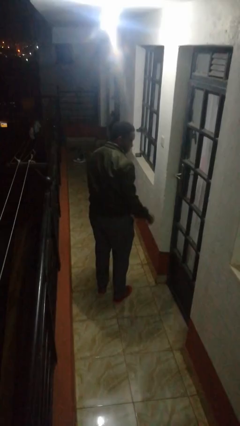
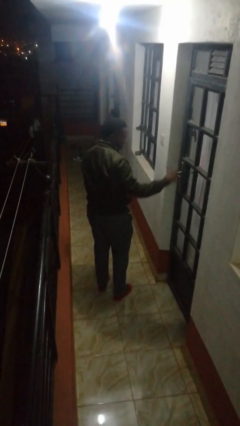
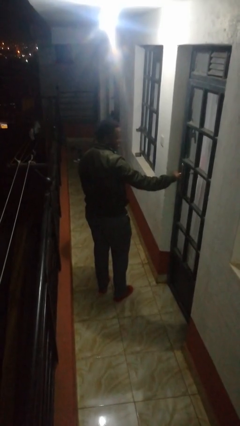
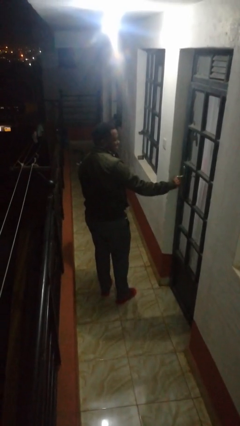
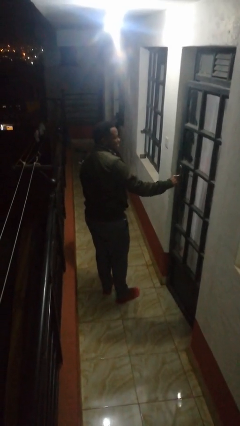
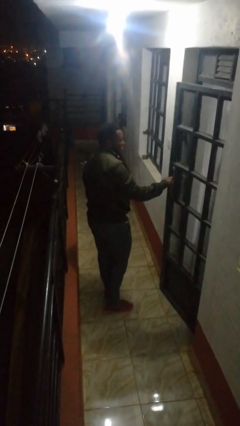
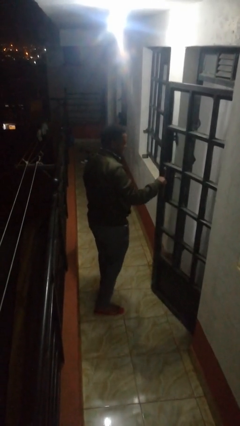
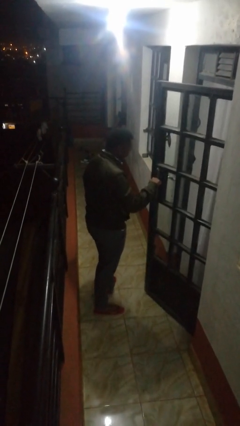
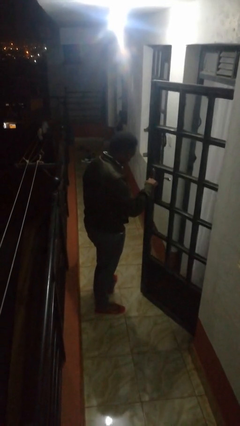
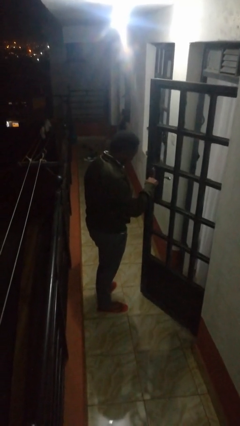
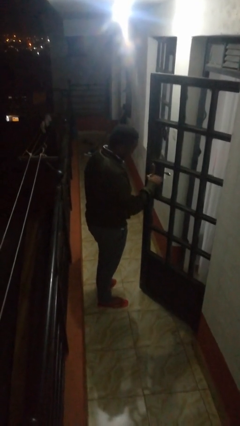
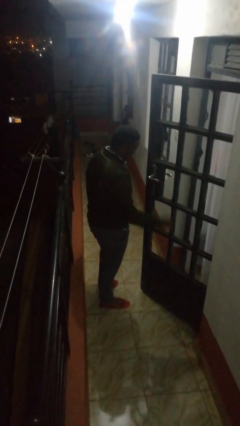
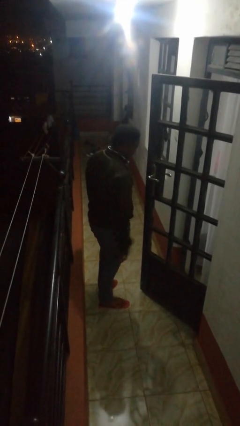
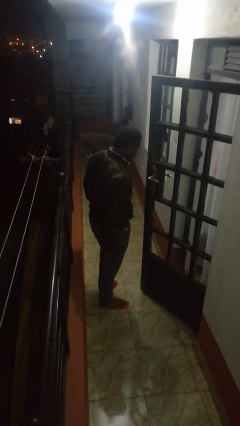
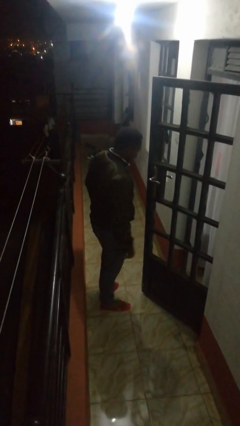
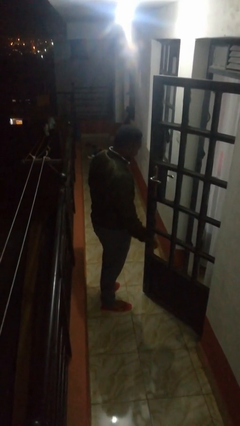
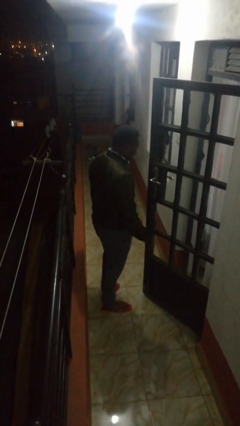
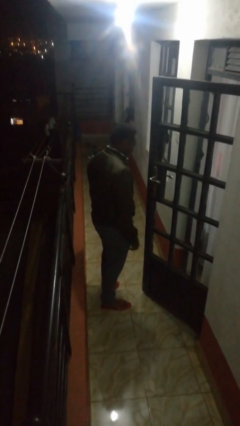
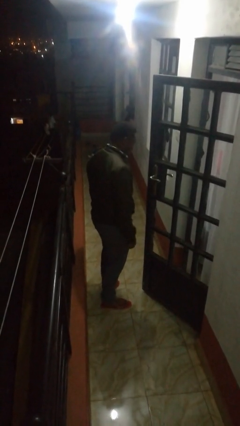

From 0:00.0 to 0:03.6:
person opens facility door

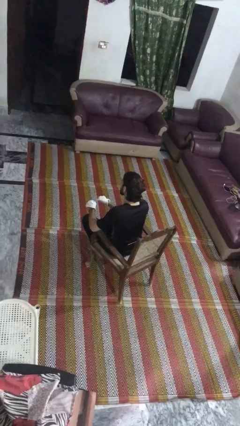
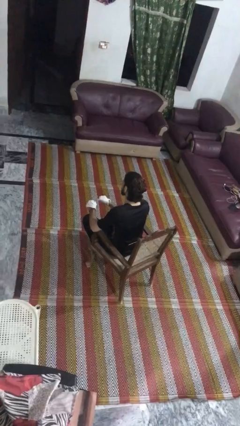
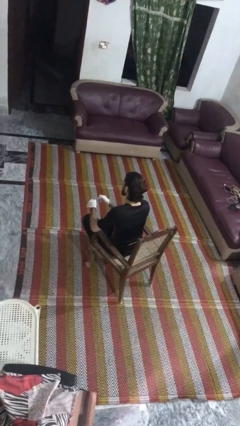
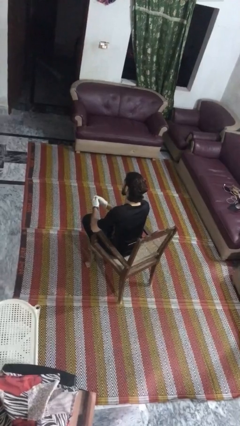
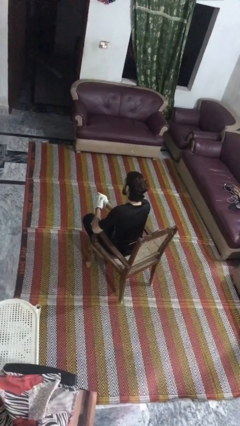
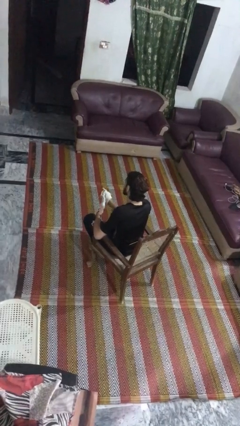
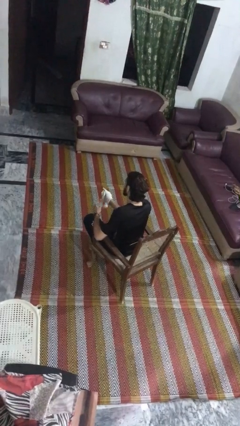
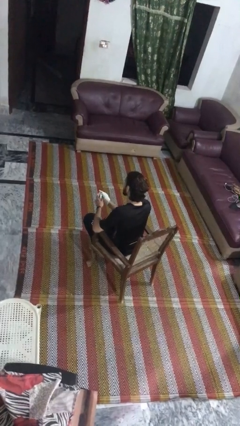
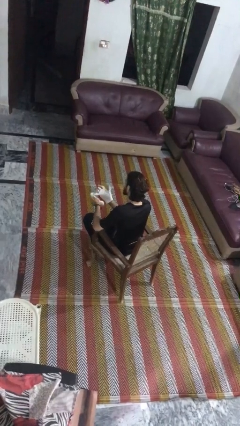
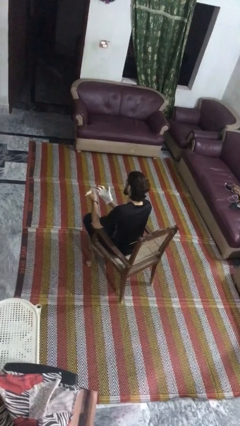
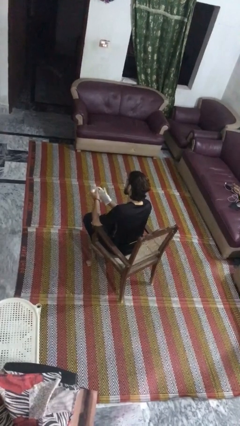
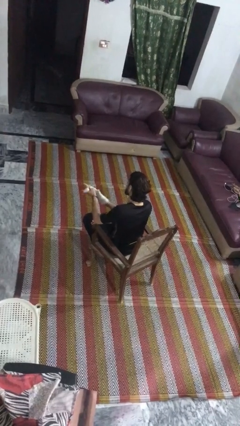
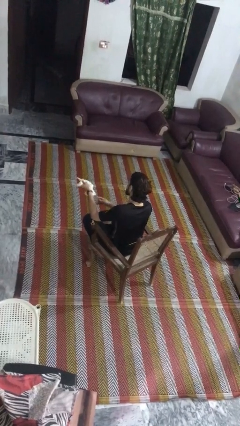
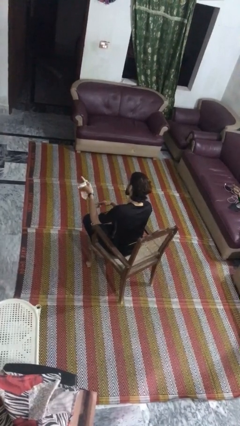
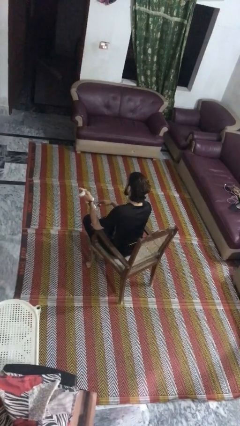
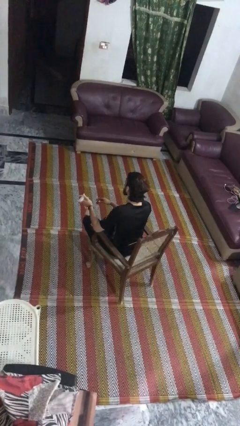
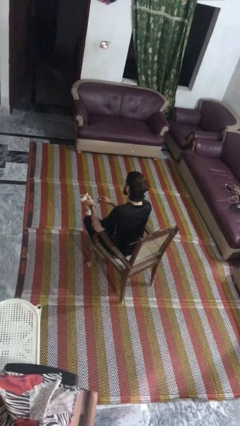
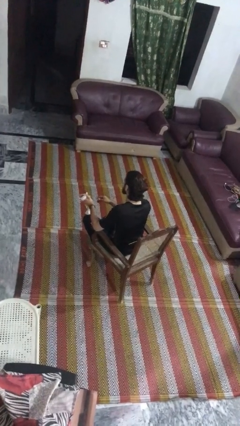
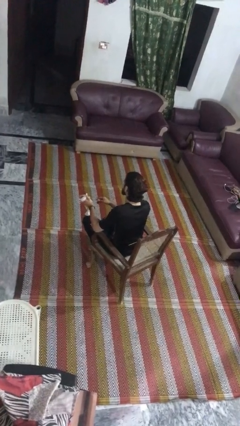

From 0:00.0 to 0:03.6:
person takes off gloves

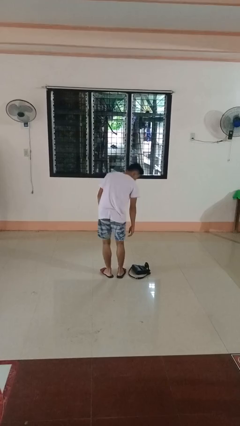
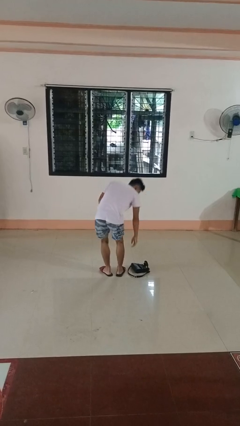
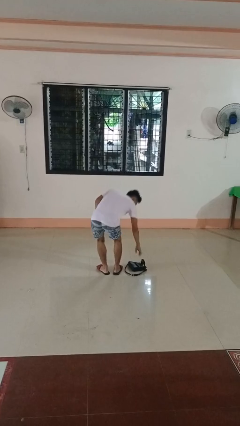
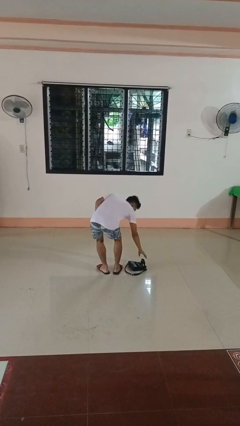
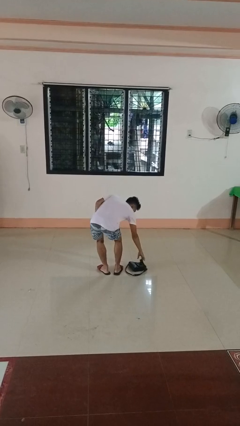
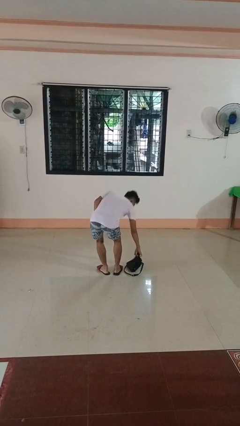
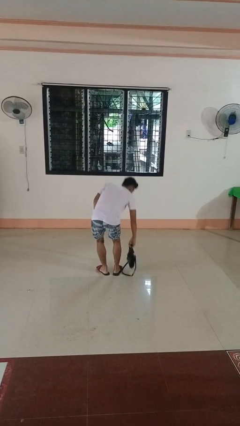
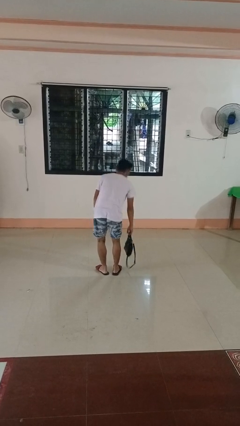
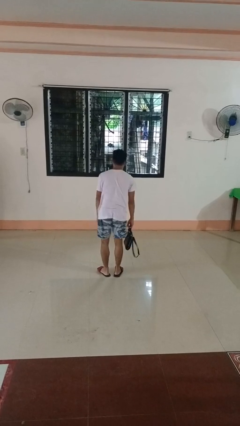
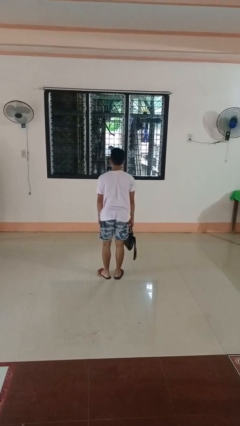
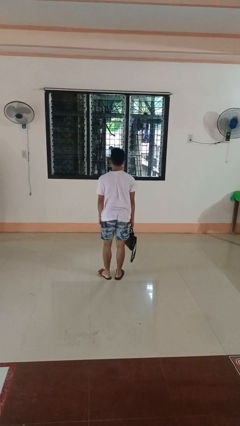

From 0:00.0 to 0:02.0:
person picks up object from floor

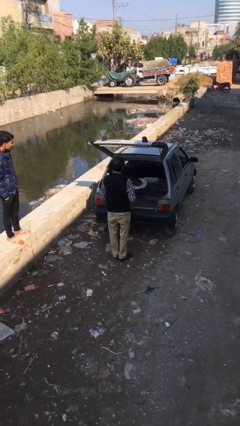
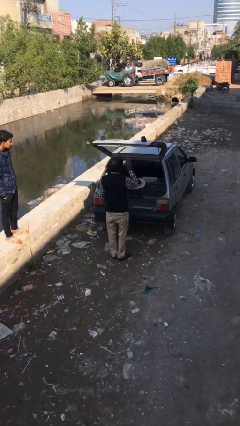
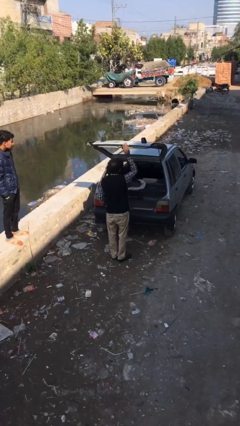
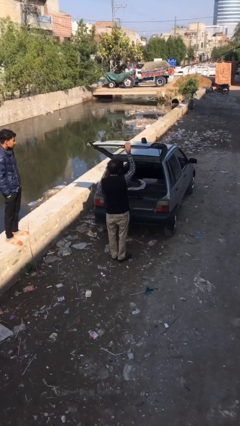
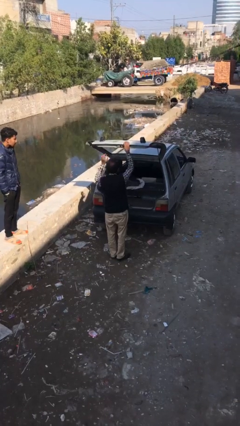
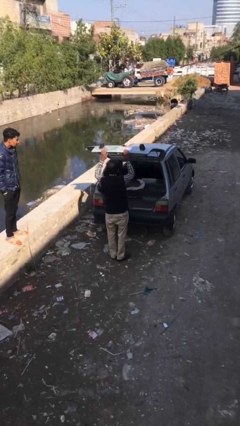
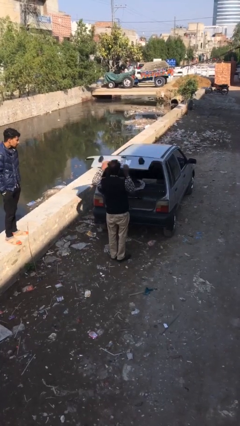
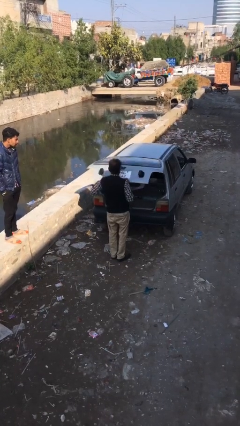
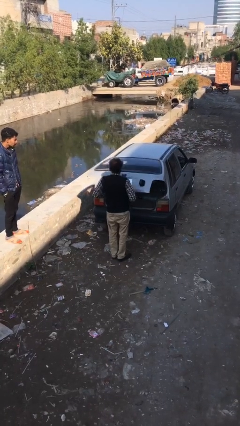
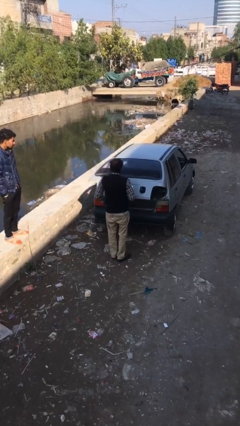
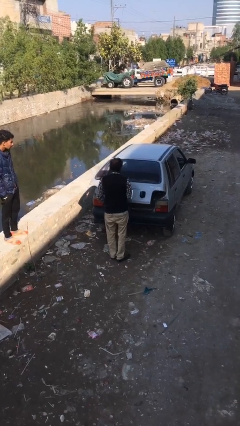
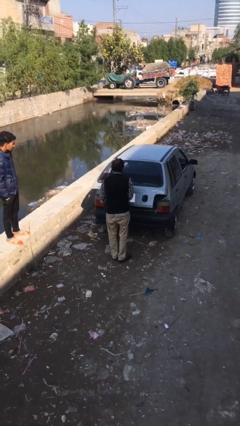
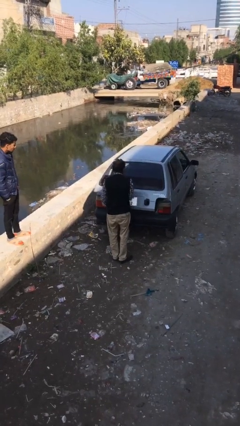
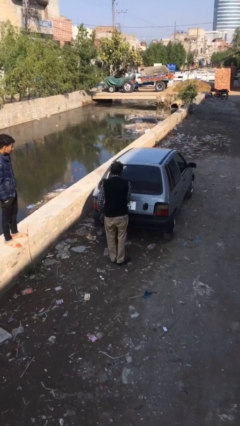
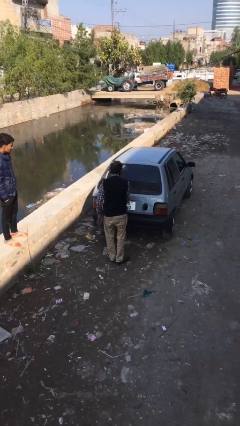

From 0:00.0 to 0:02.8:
person closes car trunk

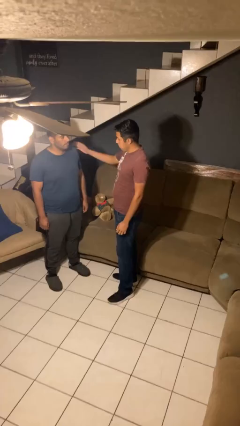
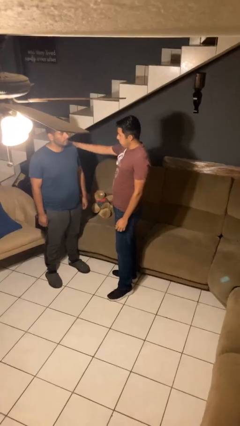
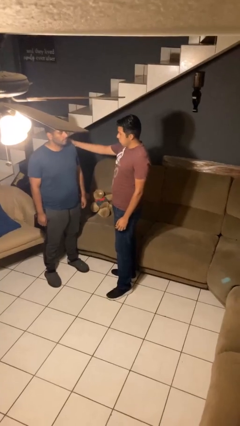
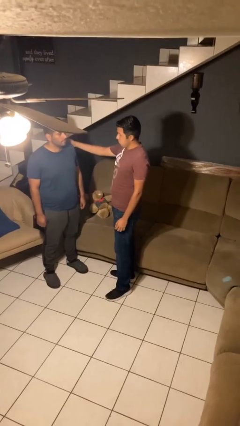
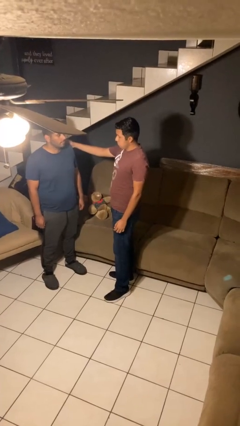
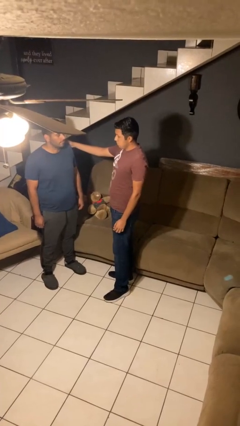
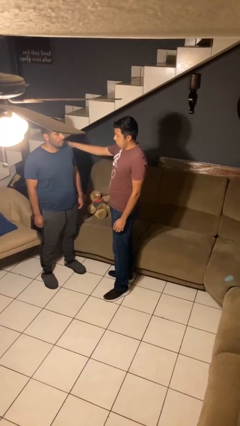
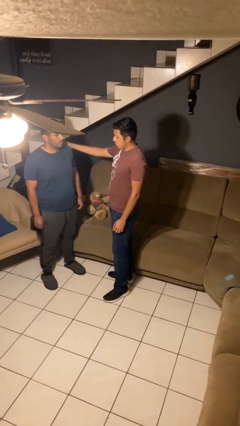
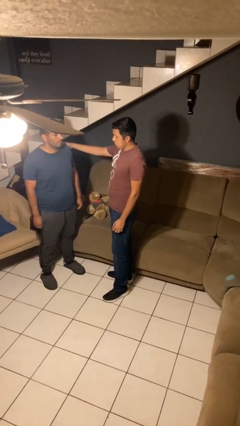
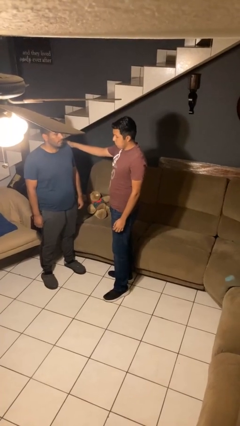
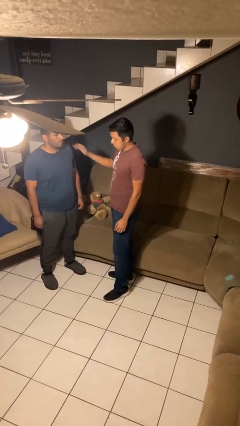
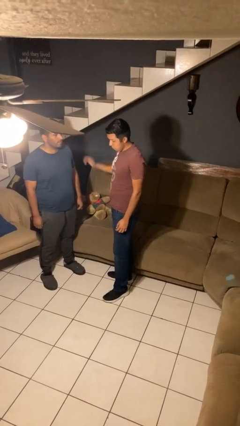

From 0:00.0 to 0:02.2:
person pounds shoulders of person

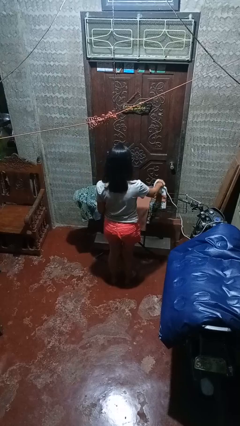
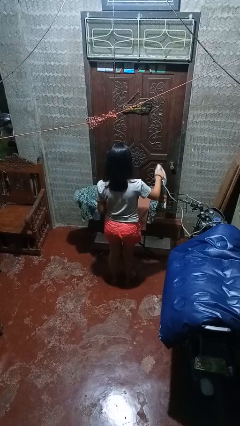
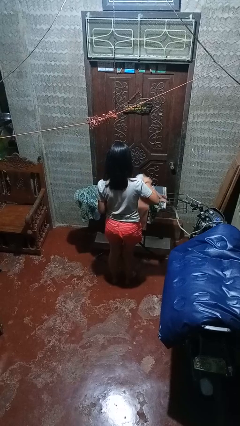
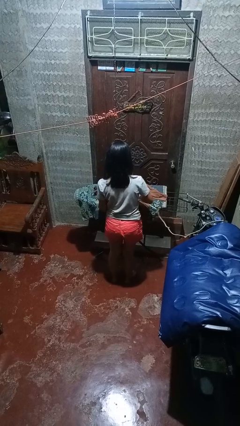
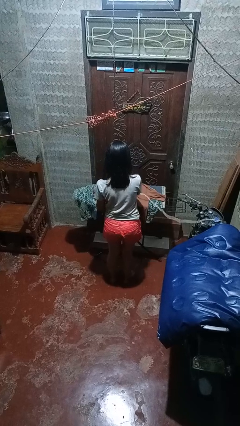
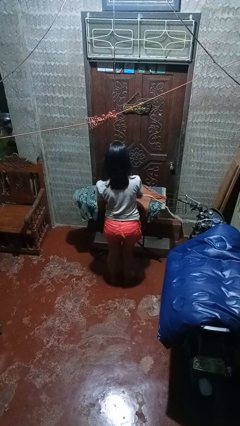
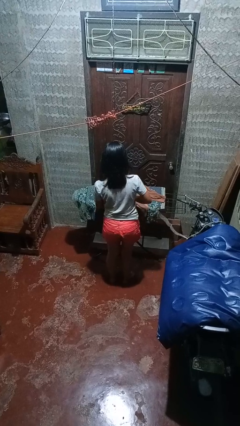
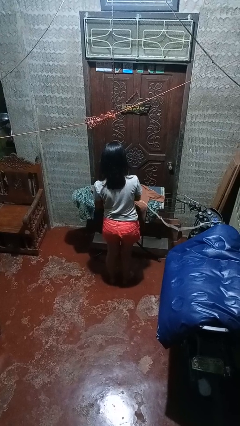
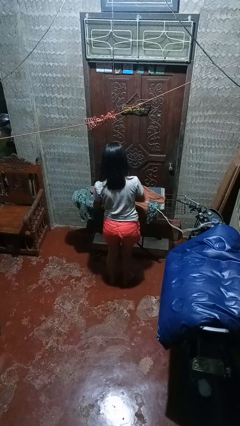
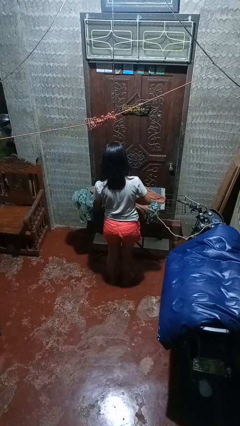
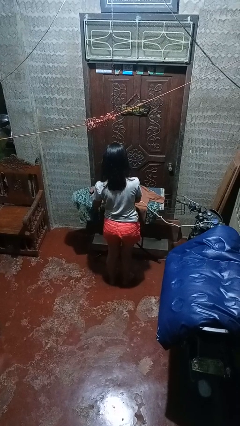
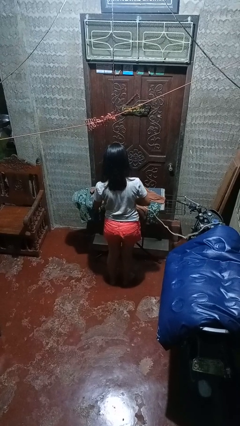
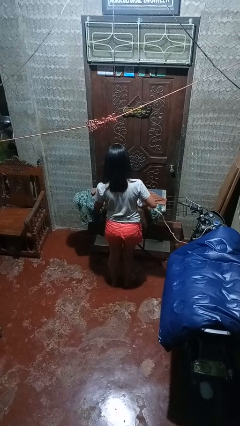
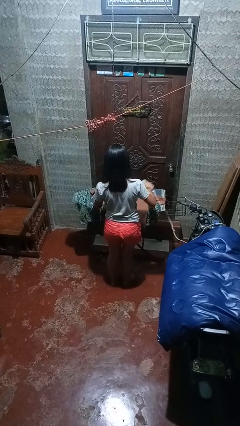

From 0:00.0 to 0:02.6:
person irons clothes

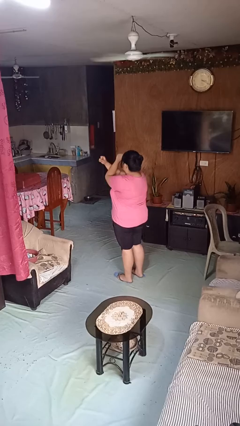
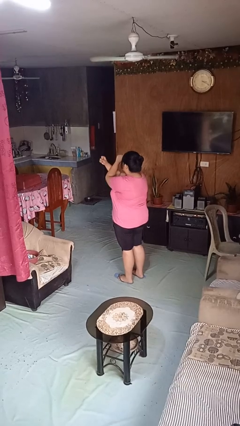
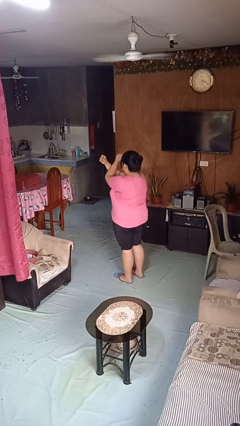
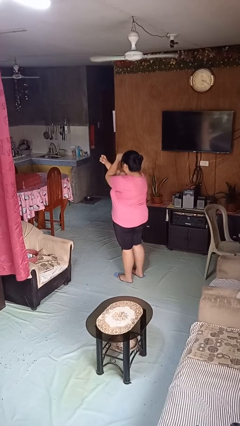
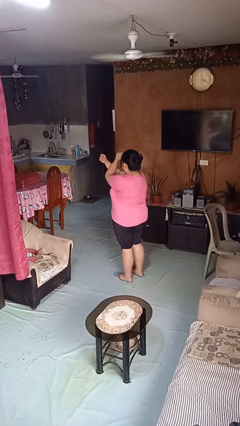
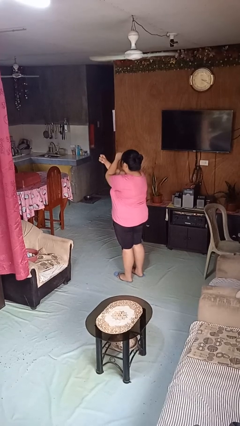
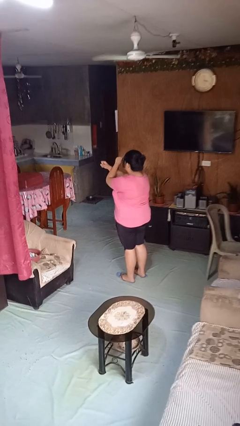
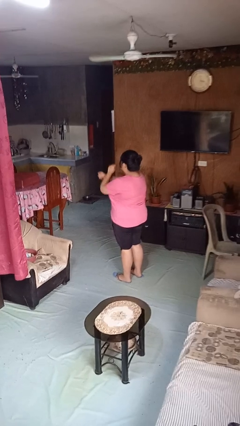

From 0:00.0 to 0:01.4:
person gestures arms x
